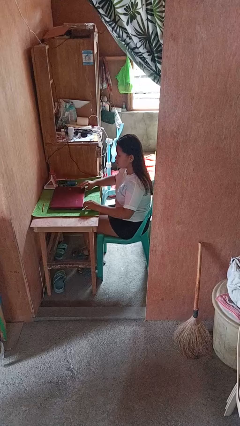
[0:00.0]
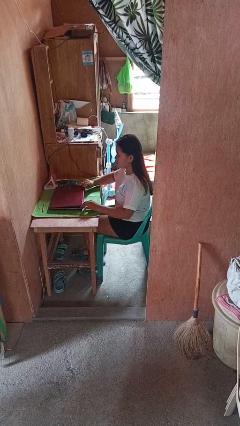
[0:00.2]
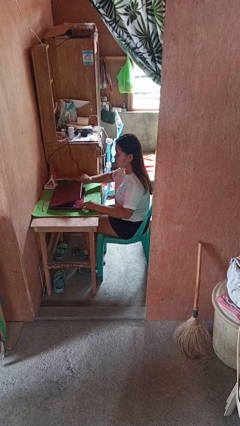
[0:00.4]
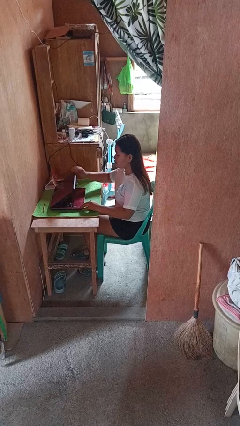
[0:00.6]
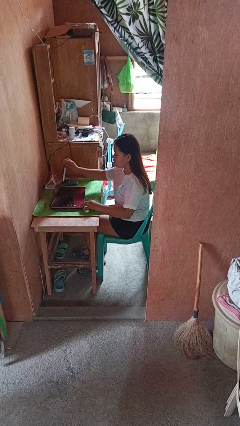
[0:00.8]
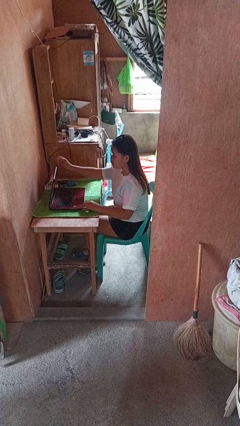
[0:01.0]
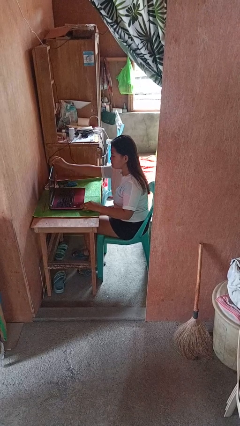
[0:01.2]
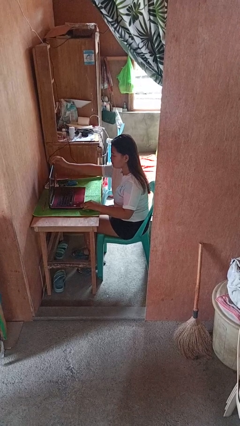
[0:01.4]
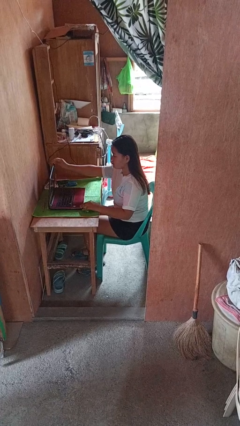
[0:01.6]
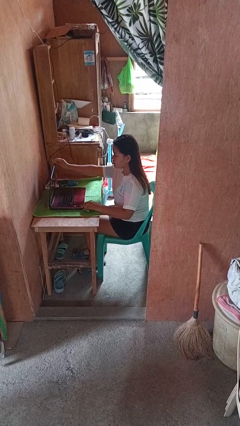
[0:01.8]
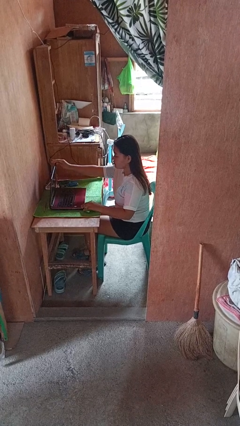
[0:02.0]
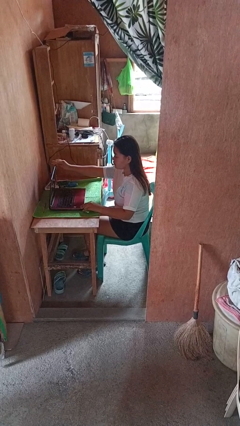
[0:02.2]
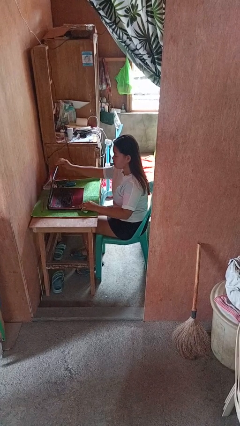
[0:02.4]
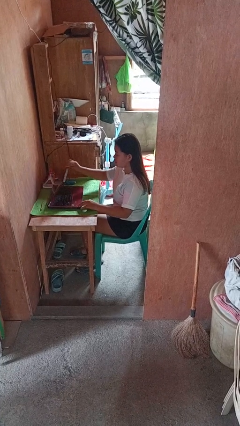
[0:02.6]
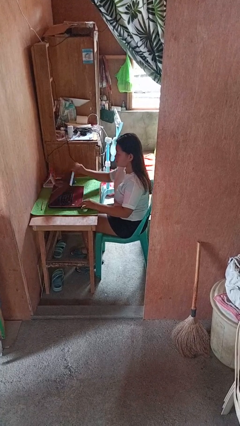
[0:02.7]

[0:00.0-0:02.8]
person opens laptop

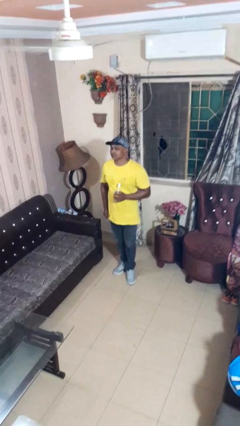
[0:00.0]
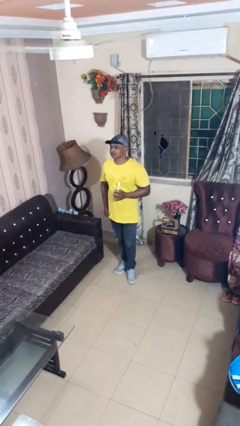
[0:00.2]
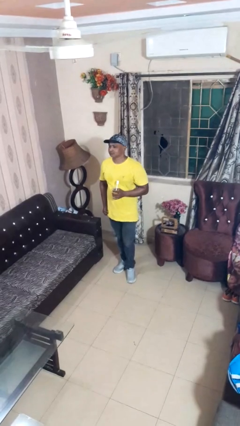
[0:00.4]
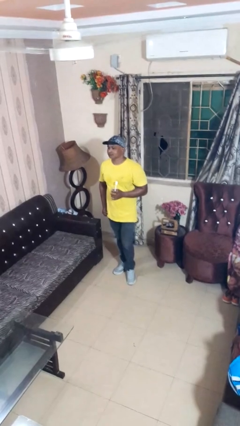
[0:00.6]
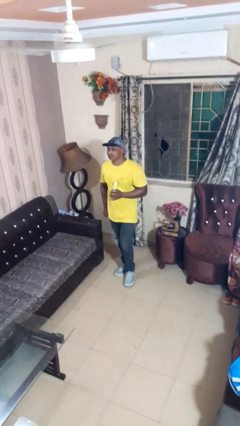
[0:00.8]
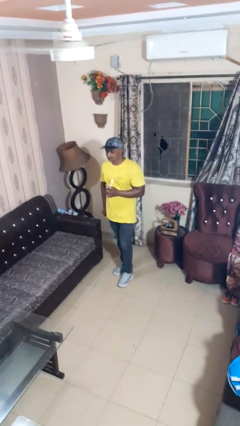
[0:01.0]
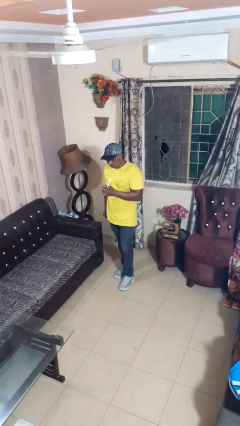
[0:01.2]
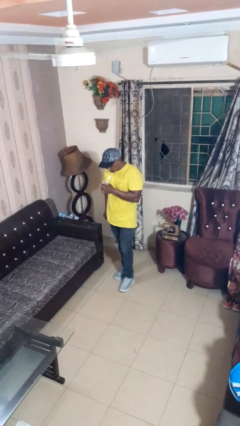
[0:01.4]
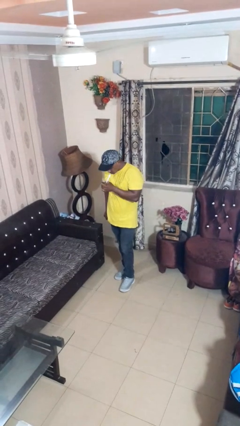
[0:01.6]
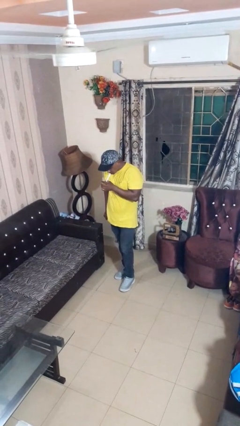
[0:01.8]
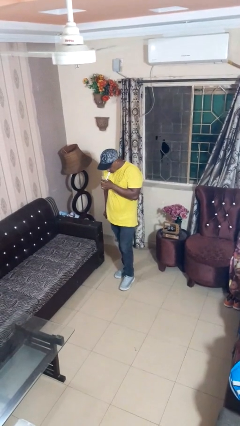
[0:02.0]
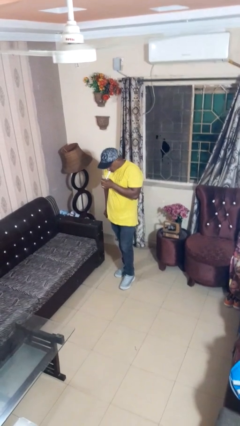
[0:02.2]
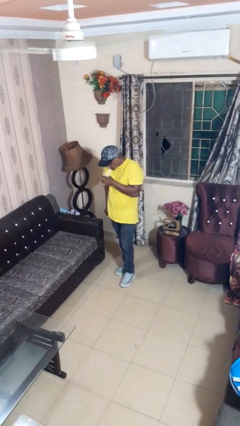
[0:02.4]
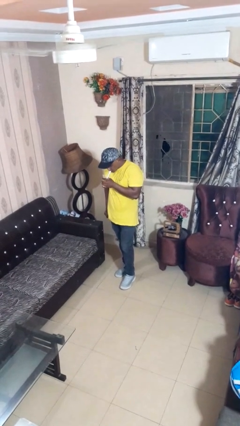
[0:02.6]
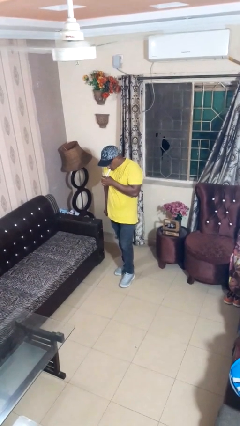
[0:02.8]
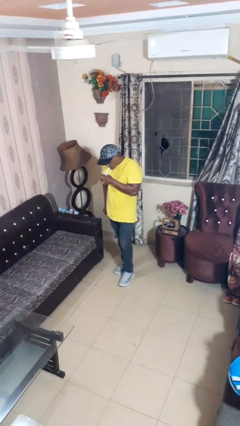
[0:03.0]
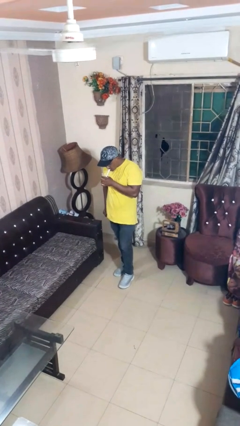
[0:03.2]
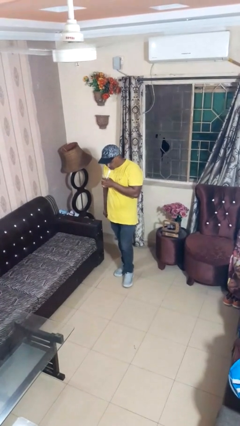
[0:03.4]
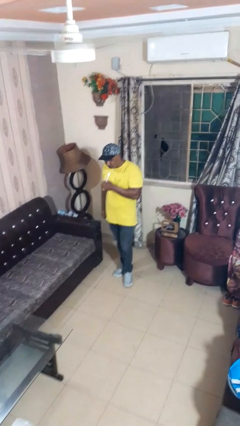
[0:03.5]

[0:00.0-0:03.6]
person drinks from straw

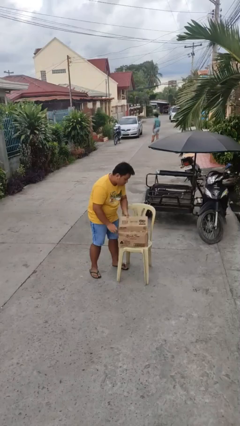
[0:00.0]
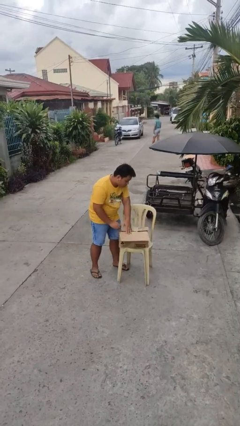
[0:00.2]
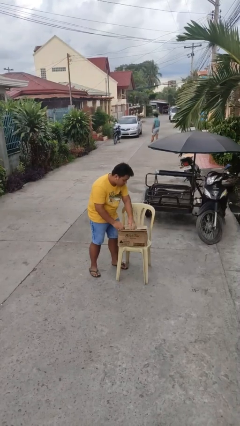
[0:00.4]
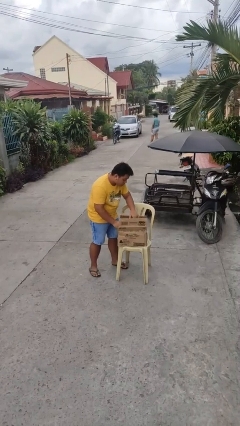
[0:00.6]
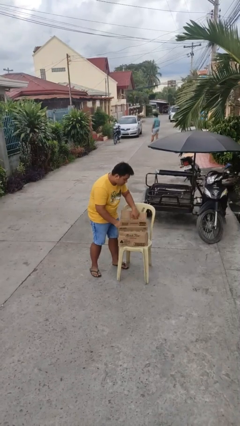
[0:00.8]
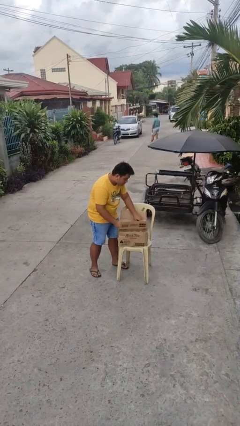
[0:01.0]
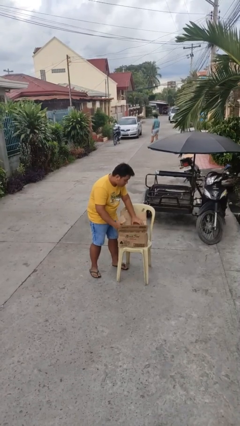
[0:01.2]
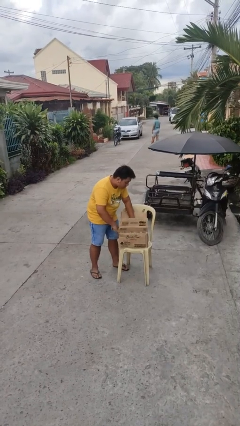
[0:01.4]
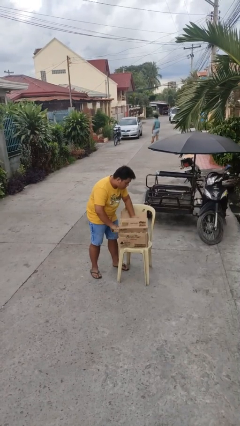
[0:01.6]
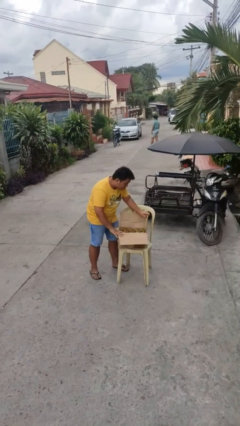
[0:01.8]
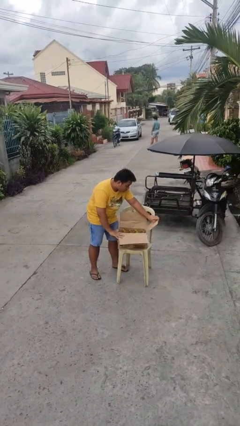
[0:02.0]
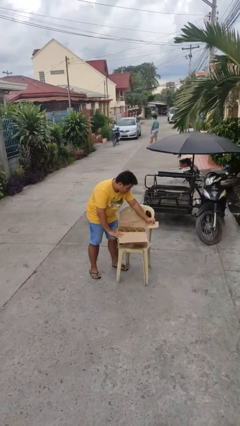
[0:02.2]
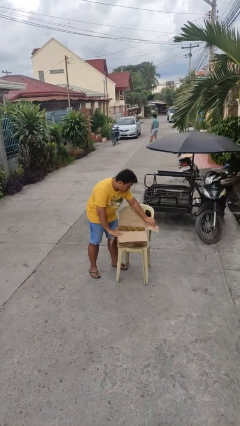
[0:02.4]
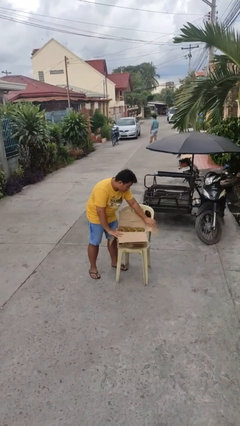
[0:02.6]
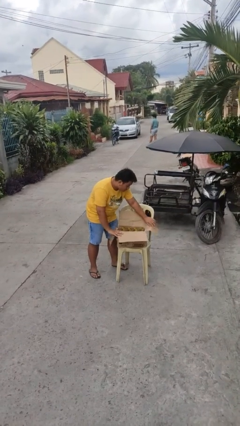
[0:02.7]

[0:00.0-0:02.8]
person opens box

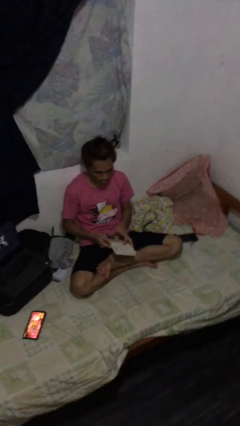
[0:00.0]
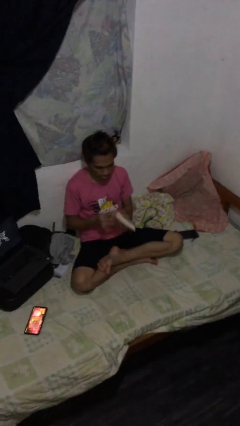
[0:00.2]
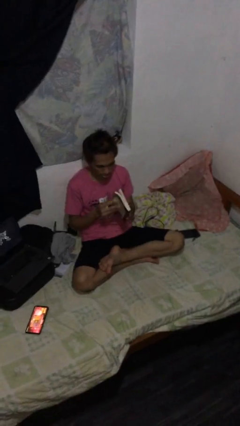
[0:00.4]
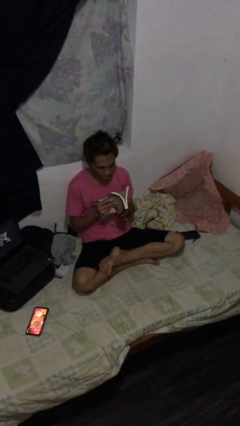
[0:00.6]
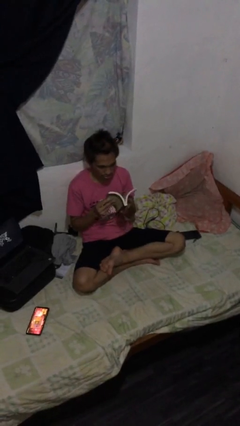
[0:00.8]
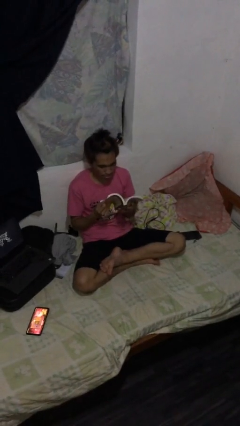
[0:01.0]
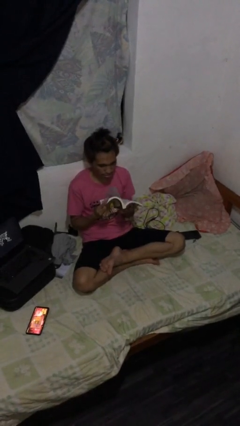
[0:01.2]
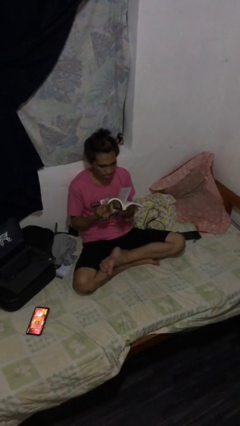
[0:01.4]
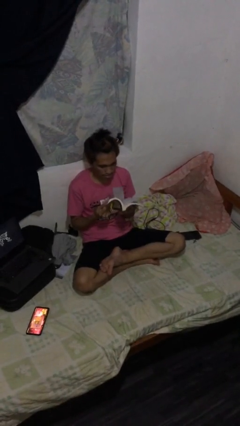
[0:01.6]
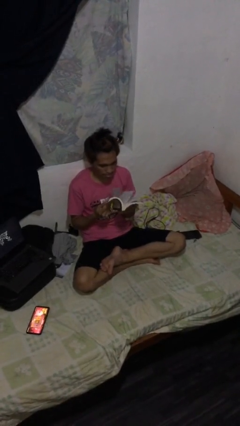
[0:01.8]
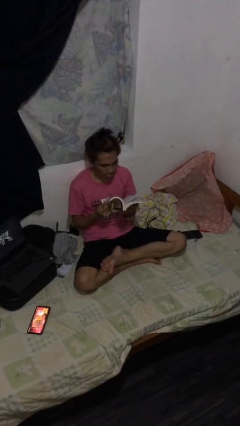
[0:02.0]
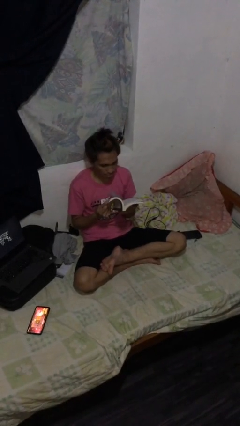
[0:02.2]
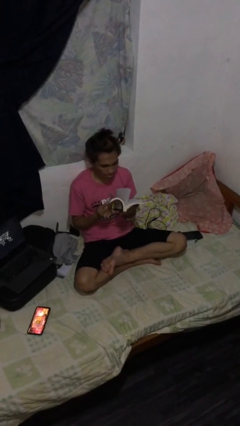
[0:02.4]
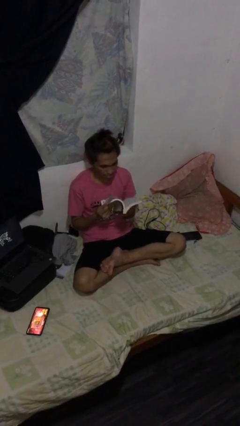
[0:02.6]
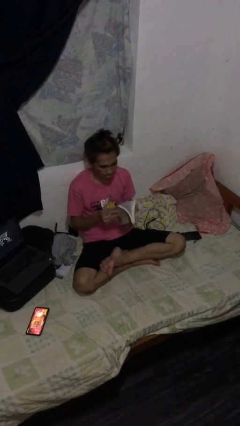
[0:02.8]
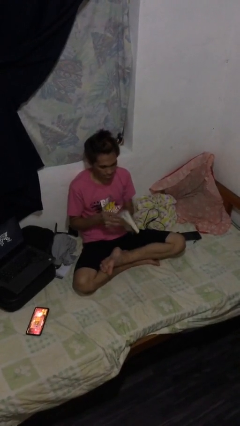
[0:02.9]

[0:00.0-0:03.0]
person reads document

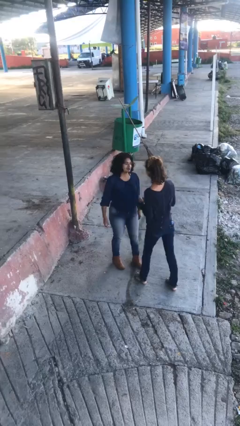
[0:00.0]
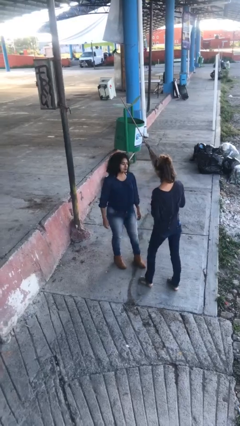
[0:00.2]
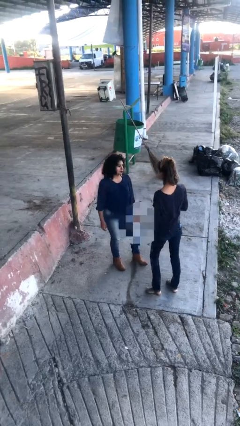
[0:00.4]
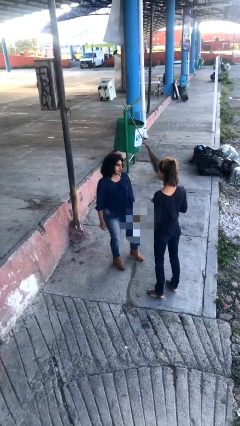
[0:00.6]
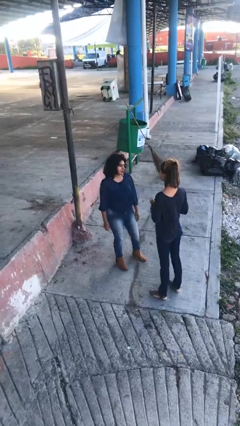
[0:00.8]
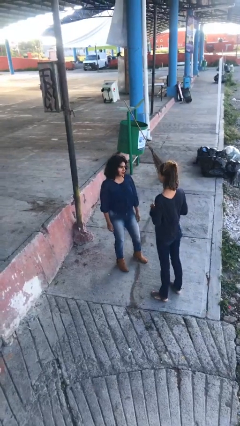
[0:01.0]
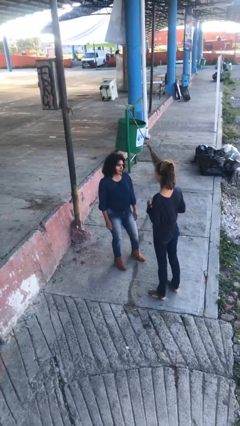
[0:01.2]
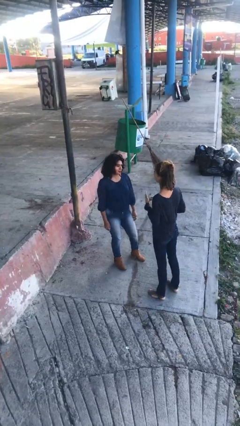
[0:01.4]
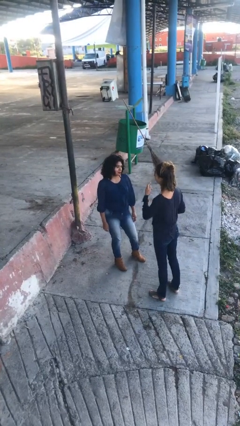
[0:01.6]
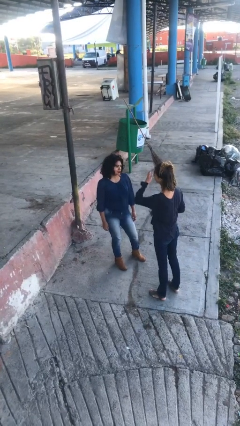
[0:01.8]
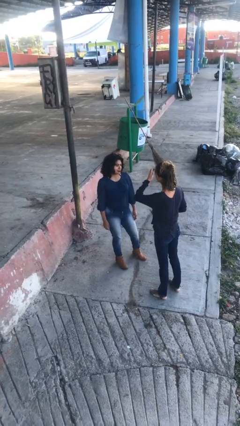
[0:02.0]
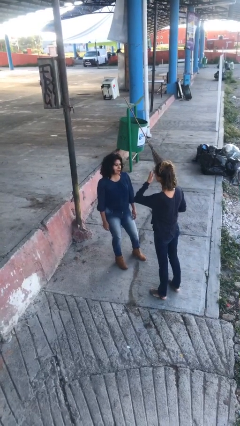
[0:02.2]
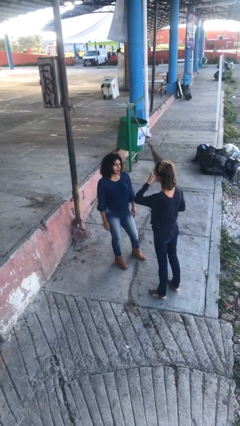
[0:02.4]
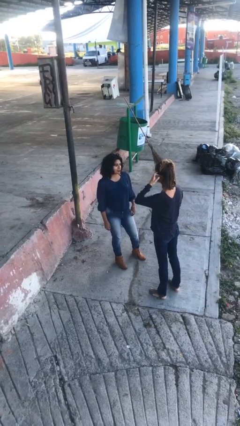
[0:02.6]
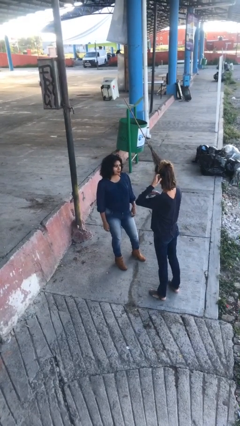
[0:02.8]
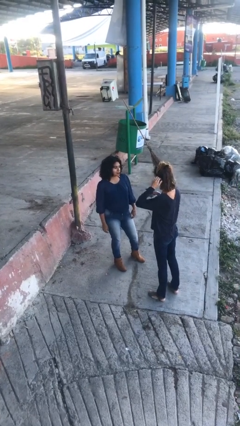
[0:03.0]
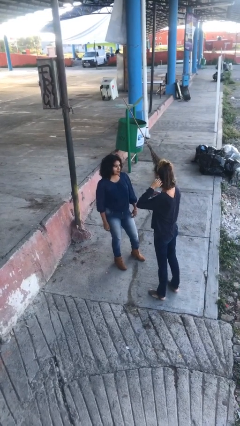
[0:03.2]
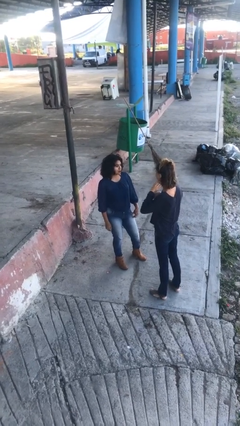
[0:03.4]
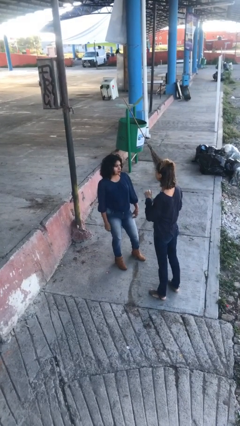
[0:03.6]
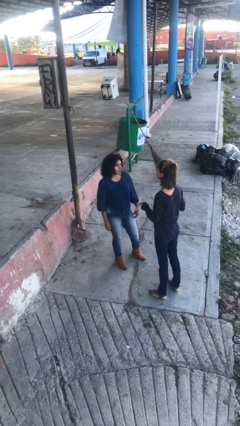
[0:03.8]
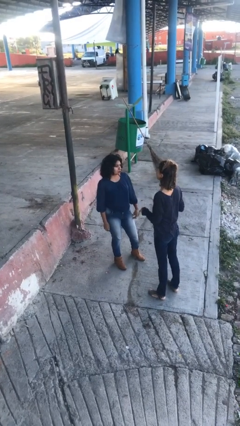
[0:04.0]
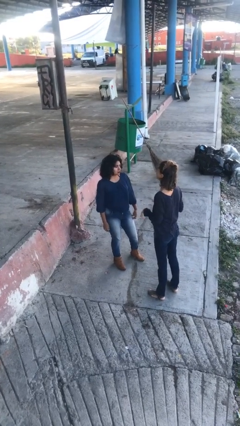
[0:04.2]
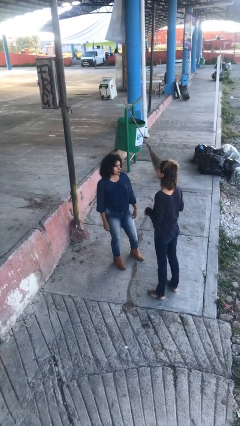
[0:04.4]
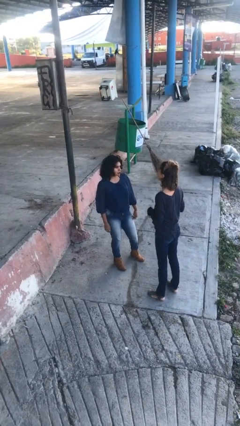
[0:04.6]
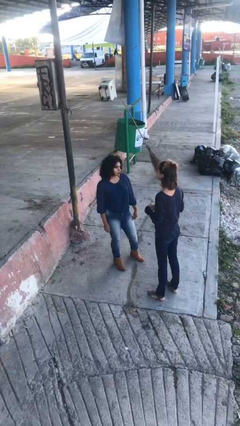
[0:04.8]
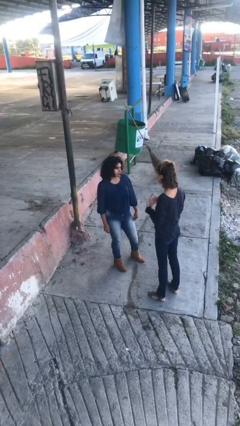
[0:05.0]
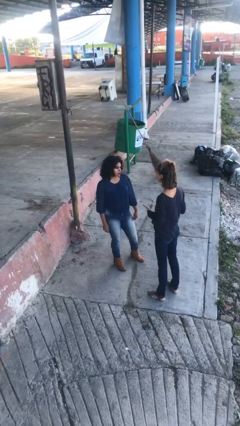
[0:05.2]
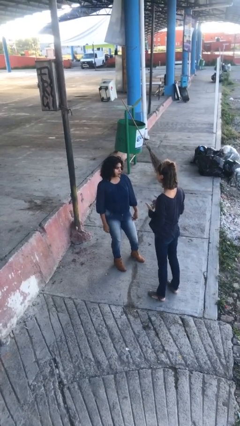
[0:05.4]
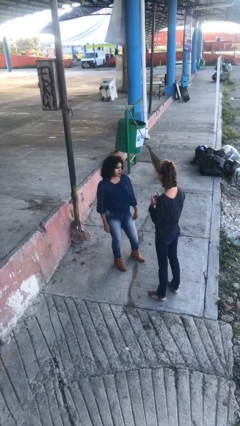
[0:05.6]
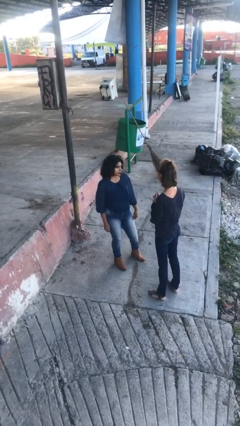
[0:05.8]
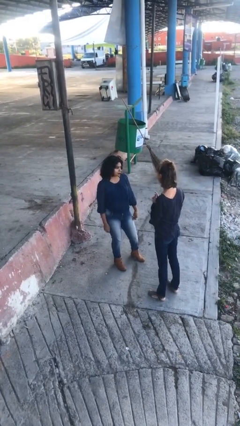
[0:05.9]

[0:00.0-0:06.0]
person talks to person

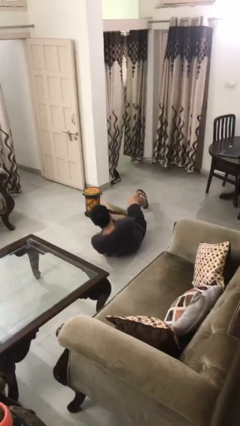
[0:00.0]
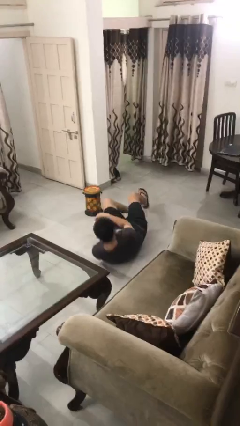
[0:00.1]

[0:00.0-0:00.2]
person lies down on floor
